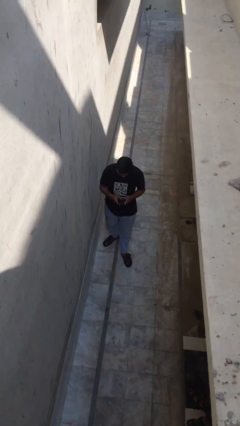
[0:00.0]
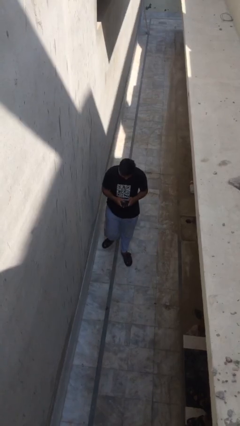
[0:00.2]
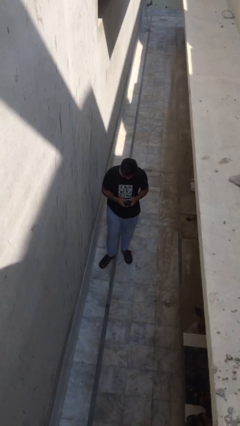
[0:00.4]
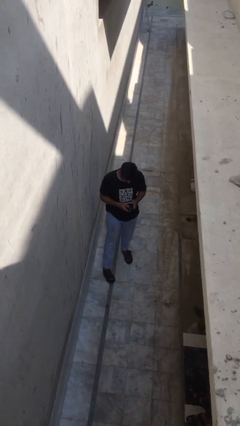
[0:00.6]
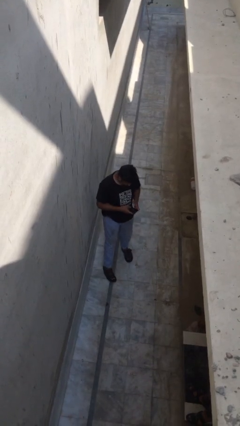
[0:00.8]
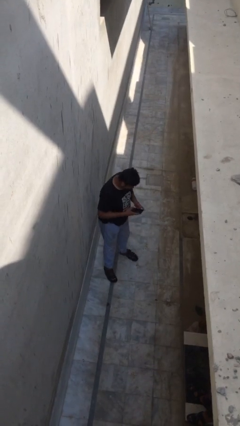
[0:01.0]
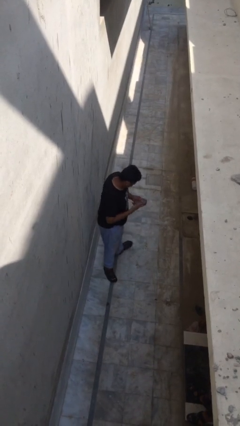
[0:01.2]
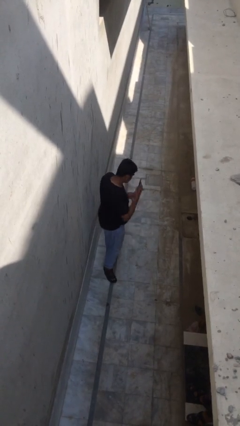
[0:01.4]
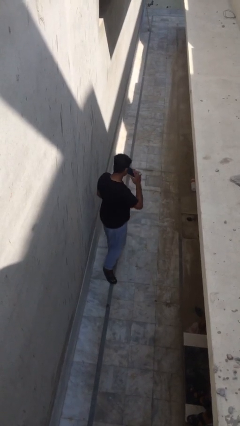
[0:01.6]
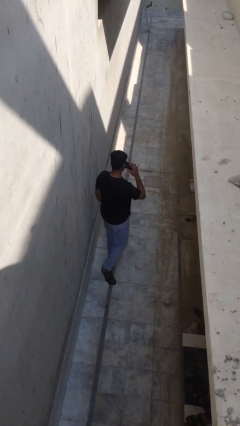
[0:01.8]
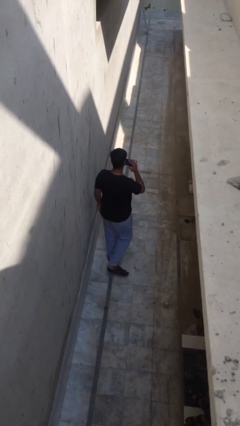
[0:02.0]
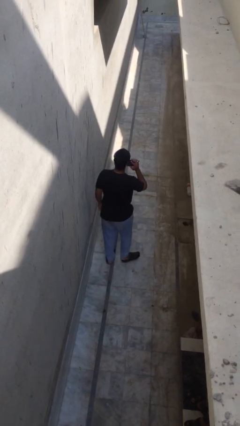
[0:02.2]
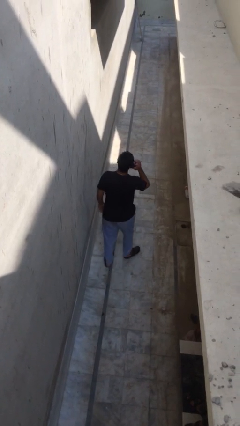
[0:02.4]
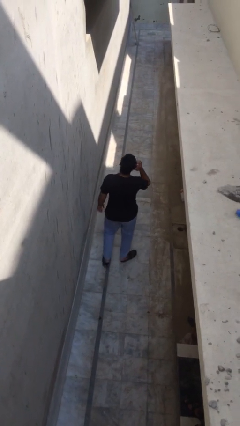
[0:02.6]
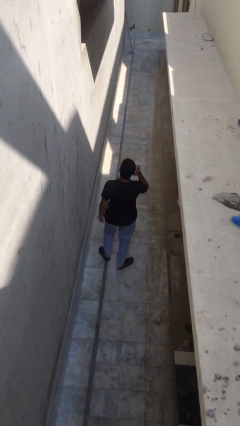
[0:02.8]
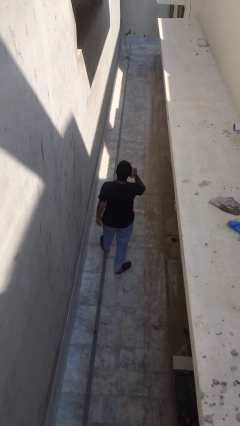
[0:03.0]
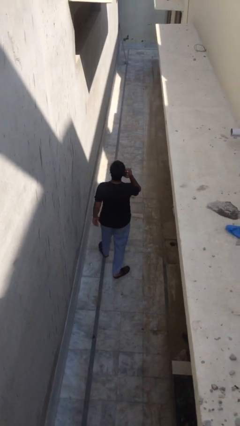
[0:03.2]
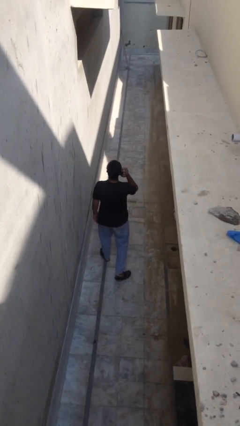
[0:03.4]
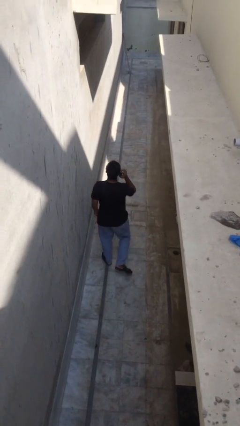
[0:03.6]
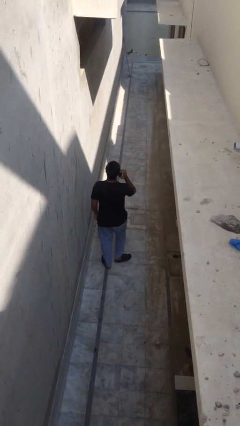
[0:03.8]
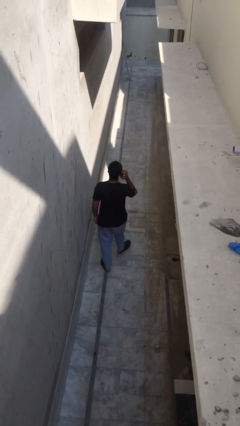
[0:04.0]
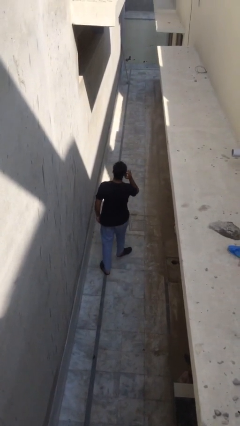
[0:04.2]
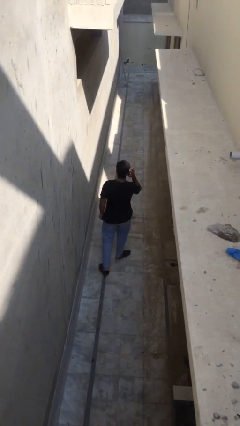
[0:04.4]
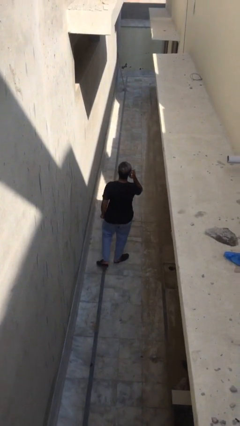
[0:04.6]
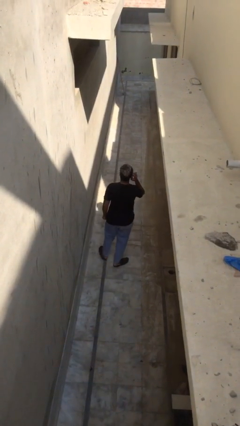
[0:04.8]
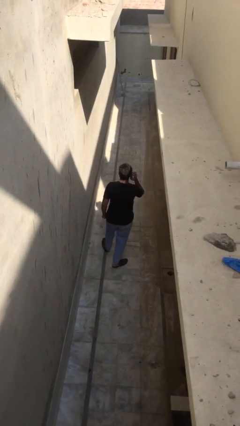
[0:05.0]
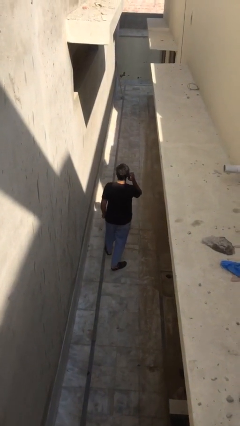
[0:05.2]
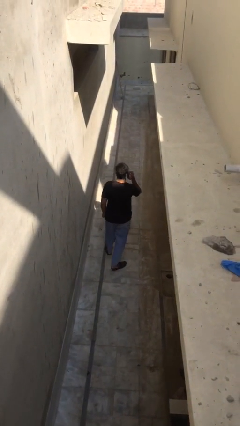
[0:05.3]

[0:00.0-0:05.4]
person talks on phone

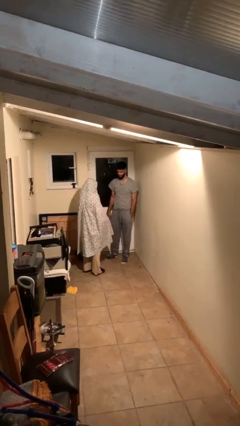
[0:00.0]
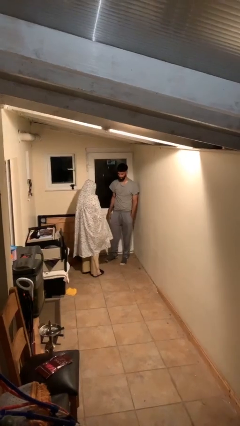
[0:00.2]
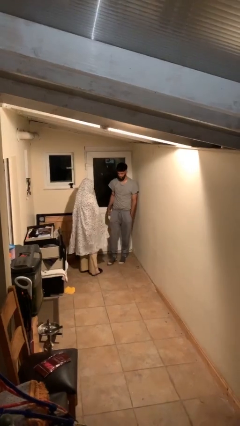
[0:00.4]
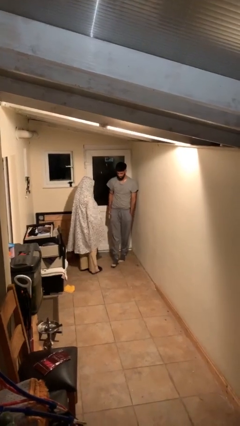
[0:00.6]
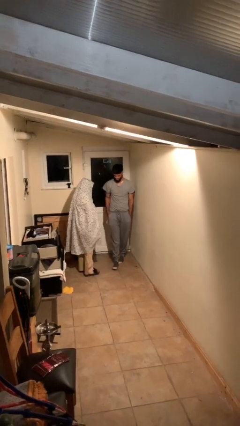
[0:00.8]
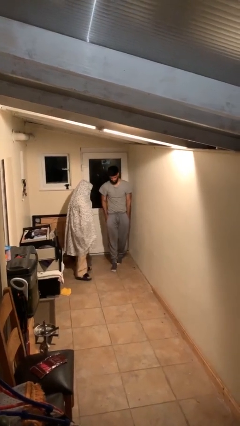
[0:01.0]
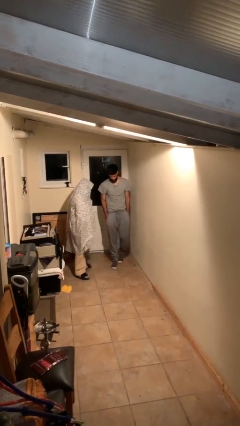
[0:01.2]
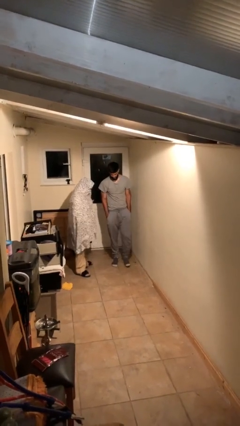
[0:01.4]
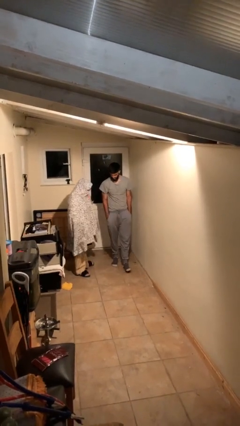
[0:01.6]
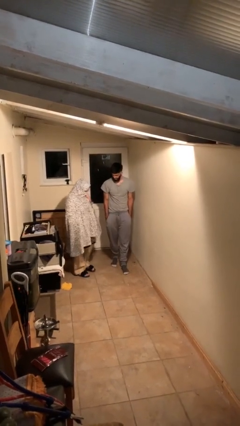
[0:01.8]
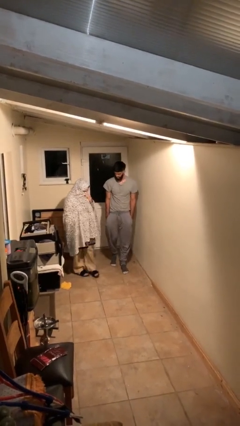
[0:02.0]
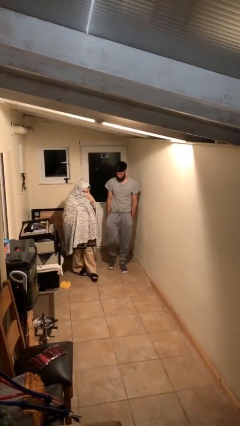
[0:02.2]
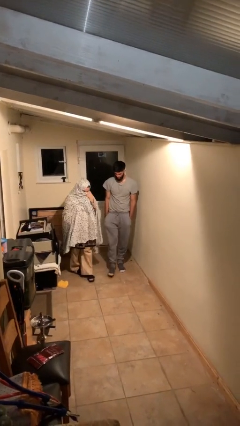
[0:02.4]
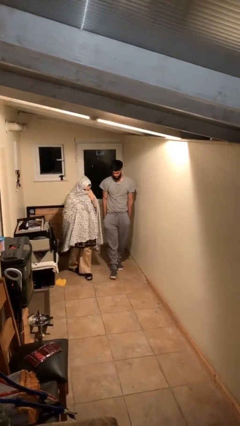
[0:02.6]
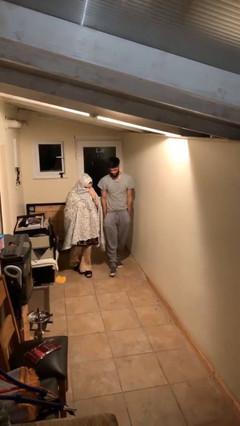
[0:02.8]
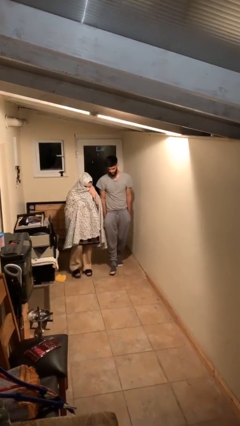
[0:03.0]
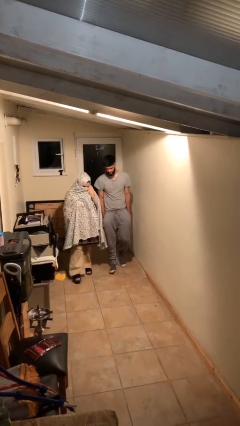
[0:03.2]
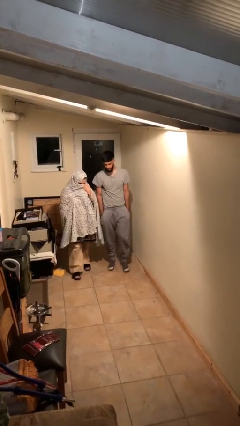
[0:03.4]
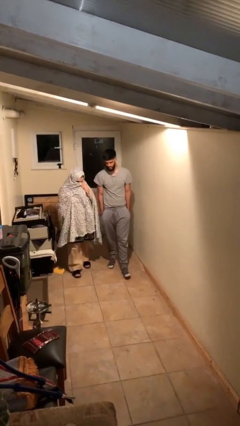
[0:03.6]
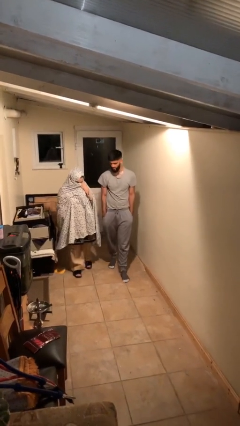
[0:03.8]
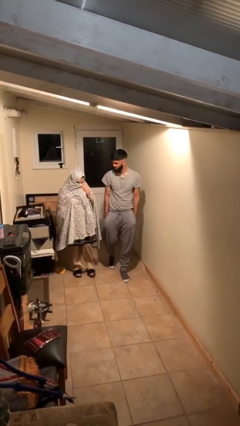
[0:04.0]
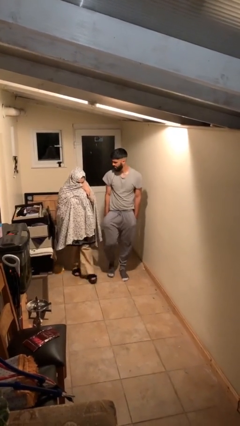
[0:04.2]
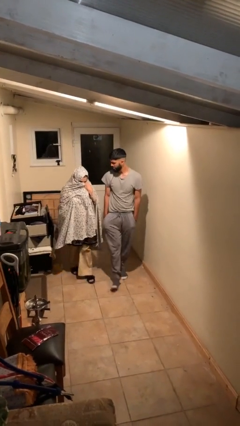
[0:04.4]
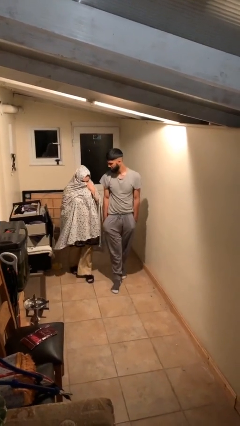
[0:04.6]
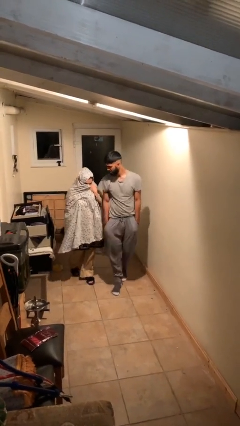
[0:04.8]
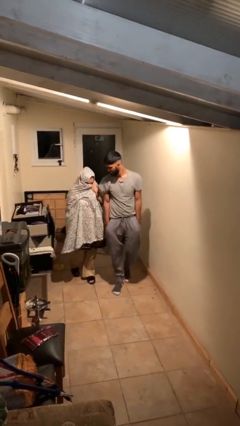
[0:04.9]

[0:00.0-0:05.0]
person talks to person

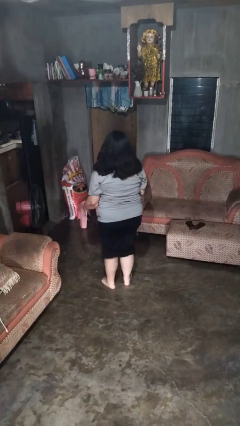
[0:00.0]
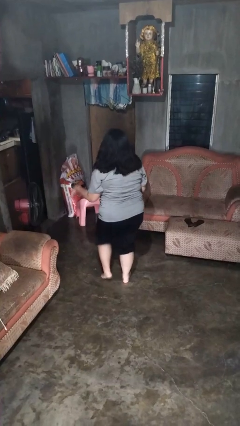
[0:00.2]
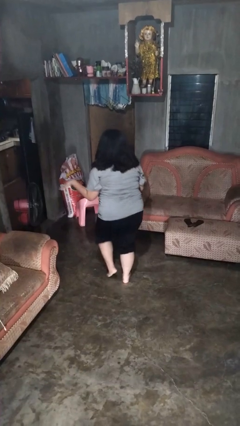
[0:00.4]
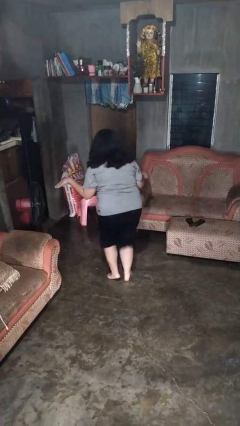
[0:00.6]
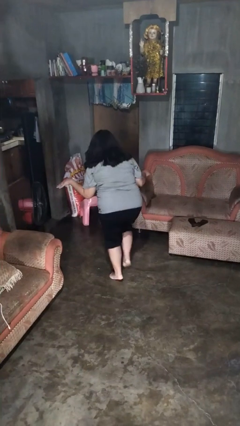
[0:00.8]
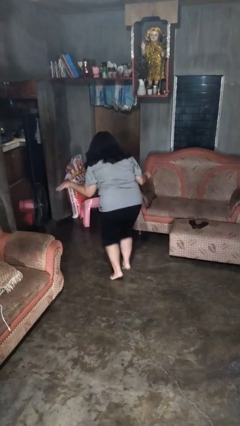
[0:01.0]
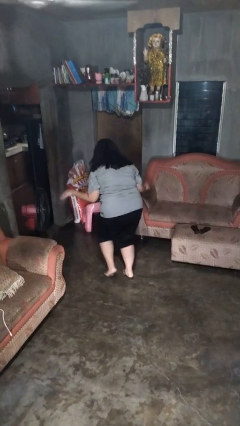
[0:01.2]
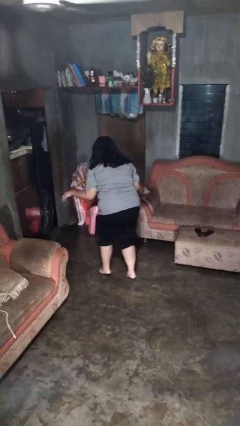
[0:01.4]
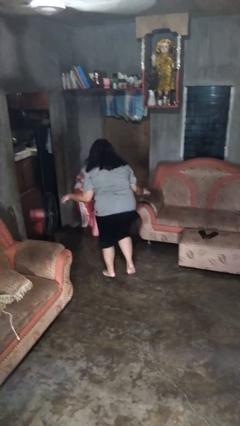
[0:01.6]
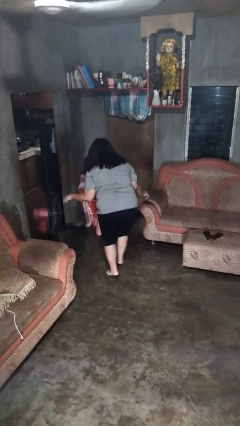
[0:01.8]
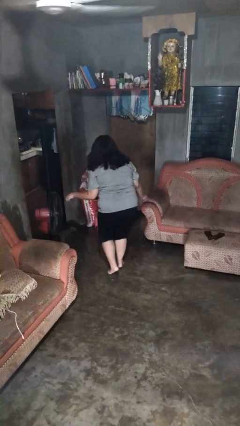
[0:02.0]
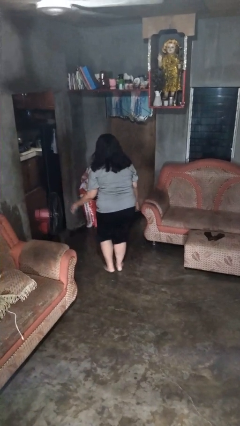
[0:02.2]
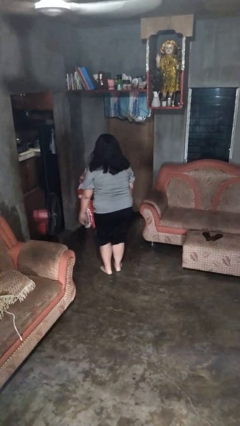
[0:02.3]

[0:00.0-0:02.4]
person walks tiptoe

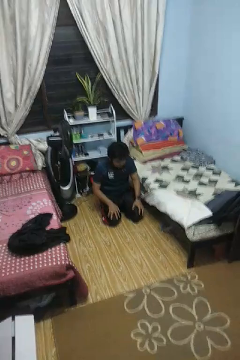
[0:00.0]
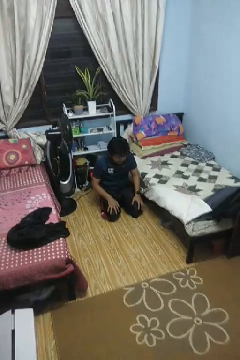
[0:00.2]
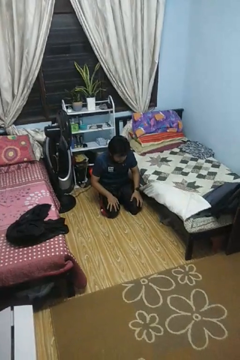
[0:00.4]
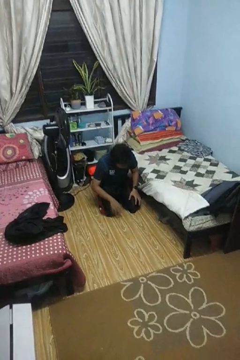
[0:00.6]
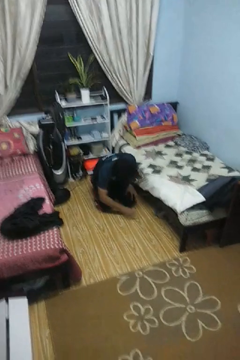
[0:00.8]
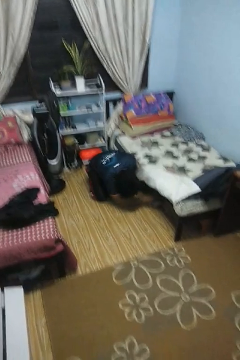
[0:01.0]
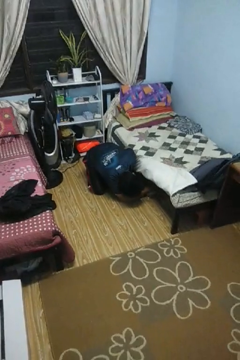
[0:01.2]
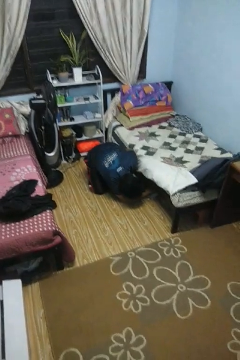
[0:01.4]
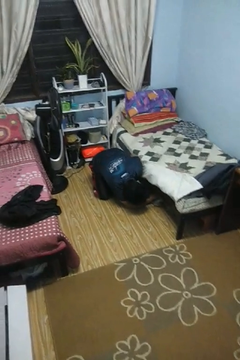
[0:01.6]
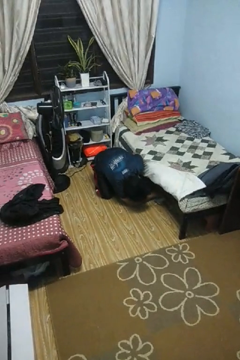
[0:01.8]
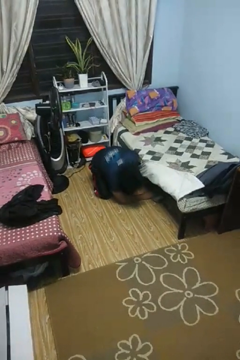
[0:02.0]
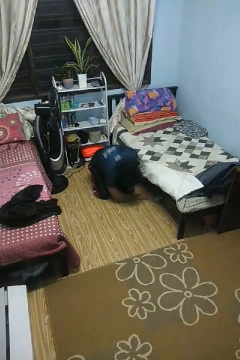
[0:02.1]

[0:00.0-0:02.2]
person searches under bed

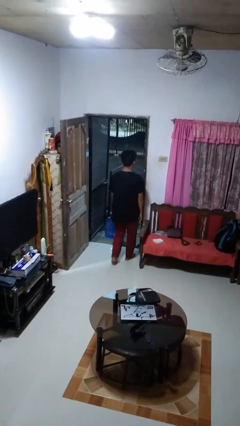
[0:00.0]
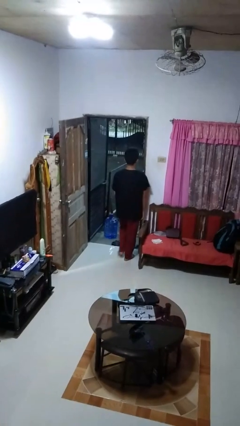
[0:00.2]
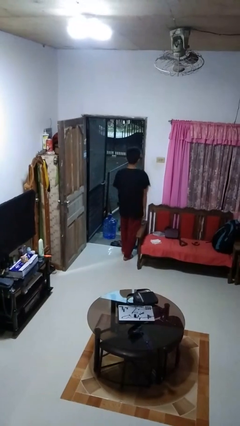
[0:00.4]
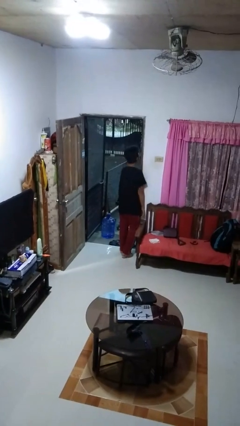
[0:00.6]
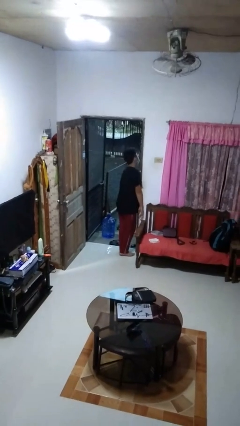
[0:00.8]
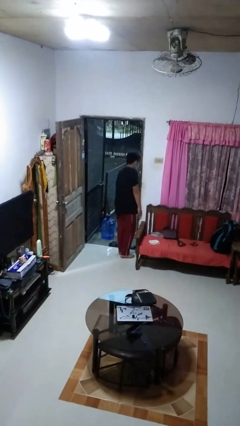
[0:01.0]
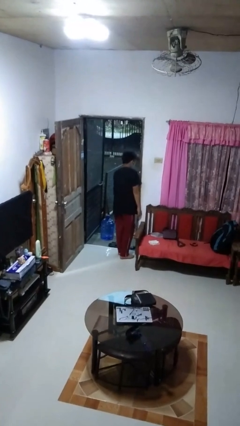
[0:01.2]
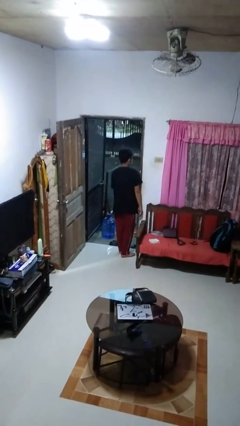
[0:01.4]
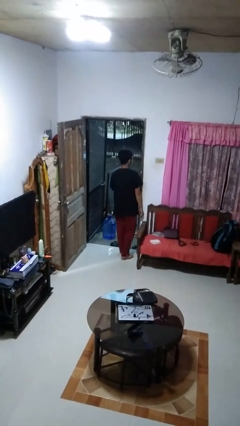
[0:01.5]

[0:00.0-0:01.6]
person bumps into wall

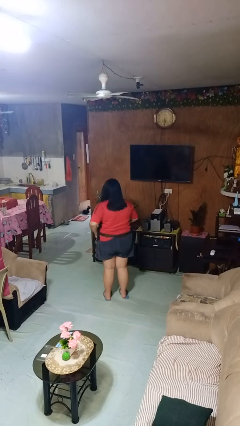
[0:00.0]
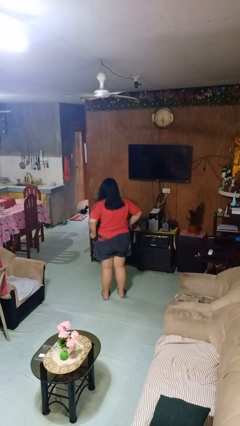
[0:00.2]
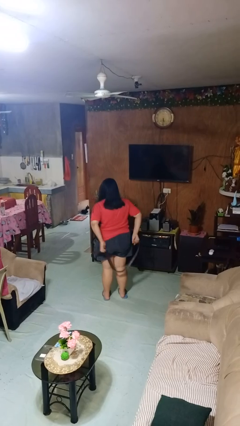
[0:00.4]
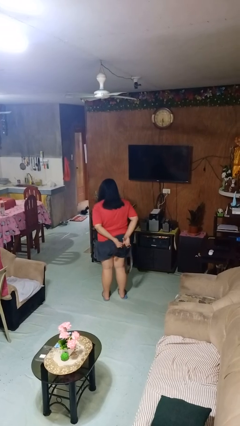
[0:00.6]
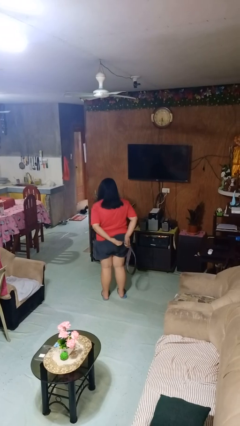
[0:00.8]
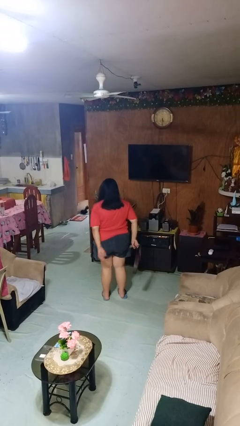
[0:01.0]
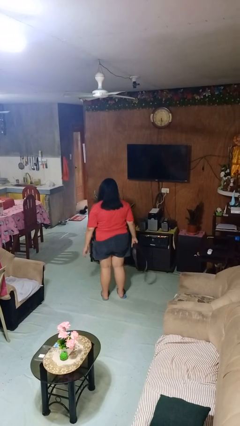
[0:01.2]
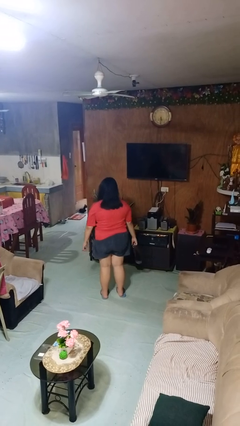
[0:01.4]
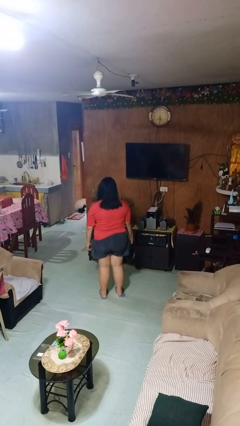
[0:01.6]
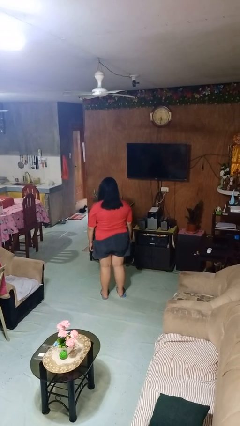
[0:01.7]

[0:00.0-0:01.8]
person takes off belt
